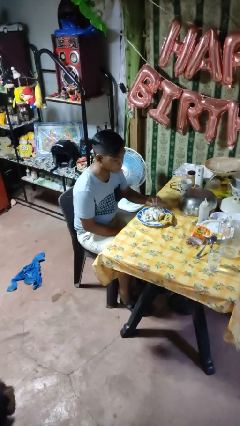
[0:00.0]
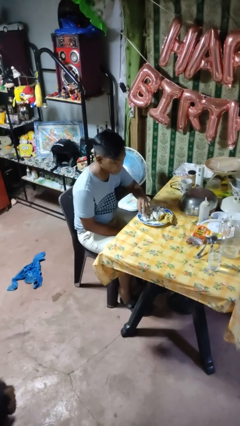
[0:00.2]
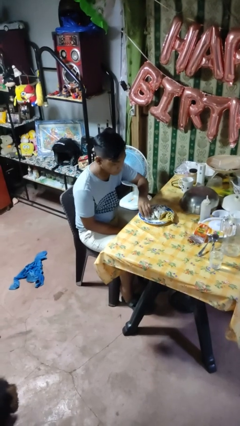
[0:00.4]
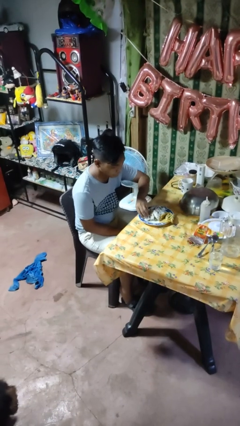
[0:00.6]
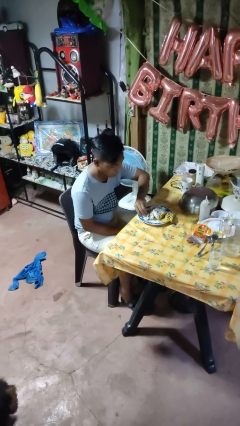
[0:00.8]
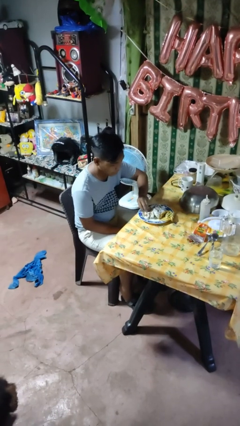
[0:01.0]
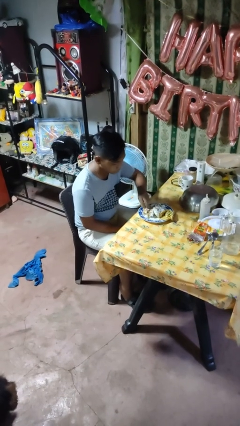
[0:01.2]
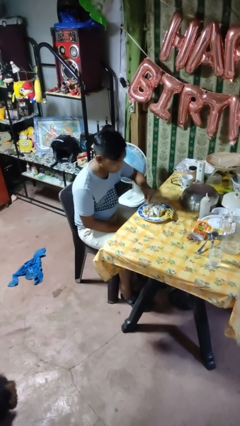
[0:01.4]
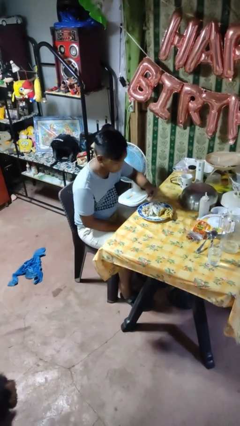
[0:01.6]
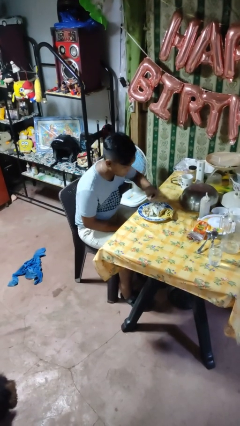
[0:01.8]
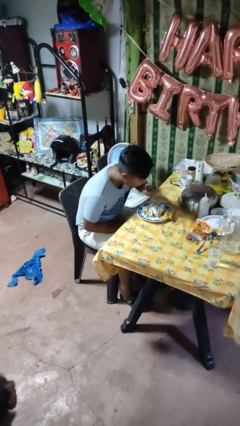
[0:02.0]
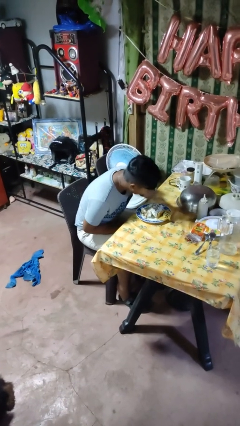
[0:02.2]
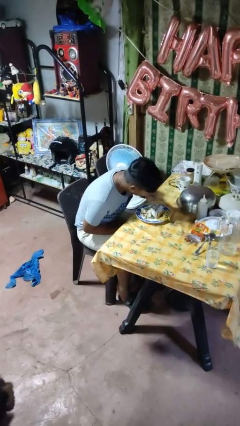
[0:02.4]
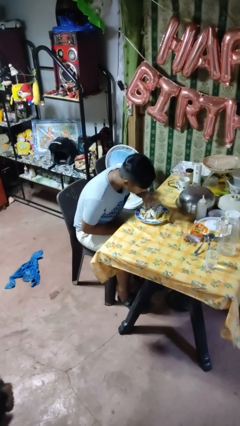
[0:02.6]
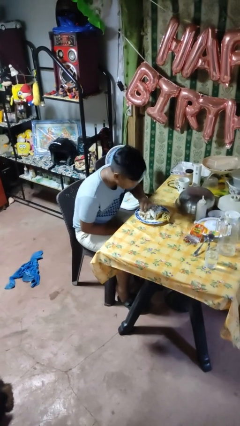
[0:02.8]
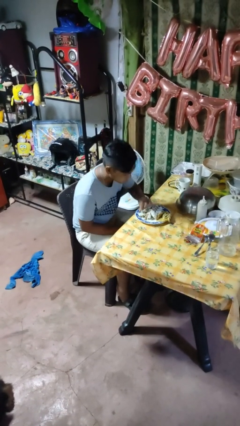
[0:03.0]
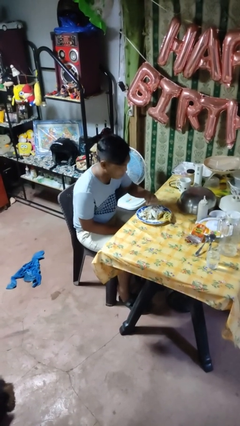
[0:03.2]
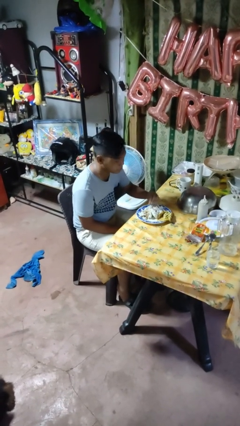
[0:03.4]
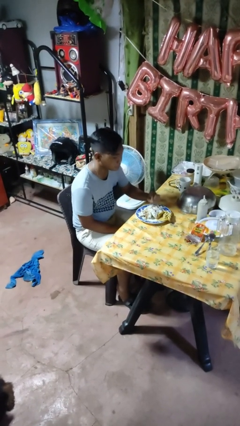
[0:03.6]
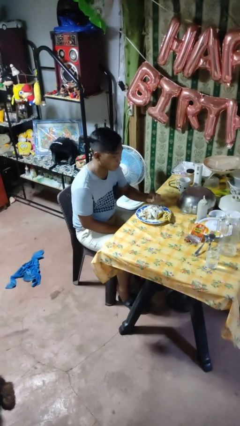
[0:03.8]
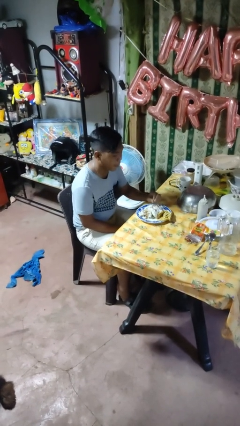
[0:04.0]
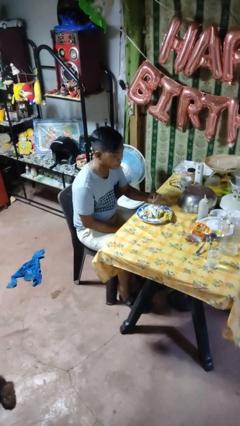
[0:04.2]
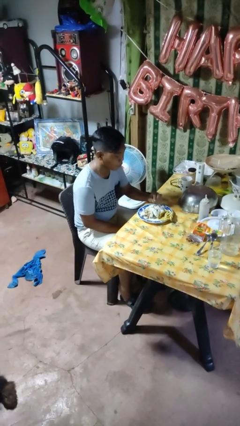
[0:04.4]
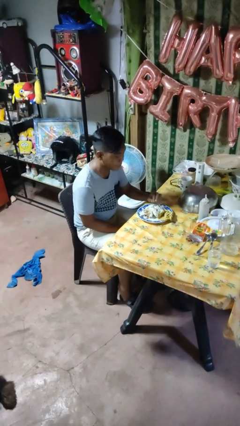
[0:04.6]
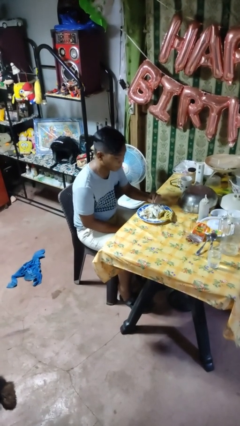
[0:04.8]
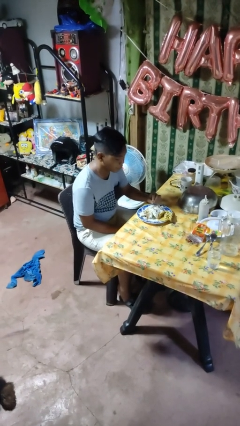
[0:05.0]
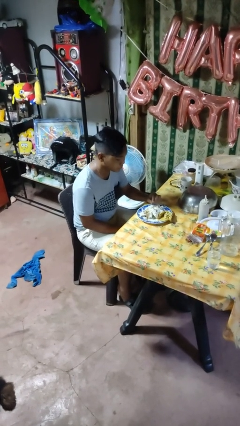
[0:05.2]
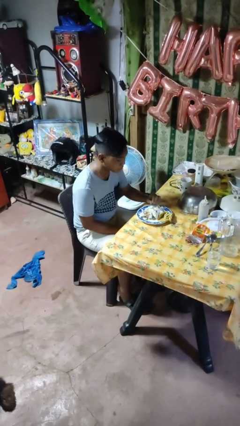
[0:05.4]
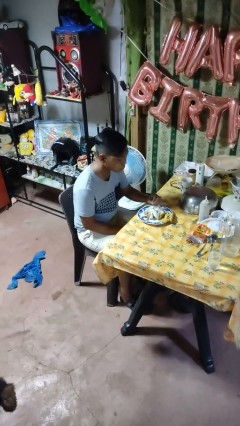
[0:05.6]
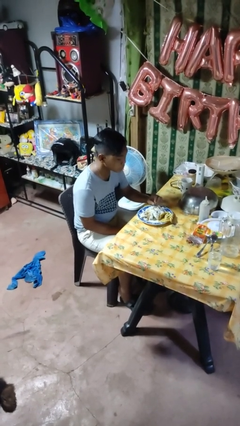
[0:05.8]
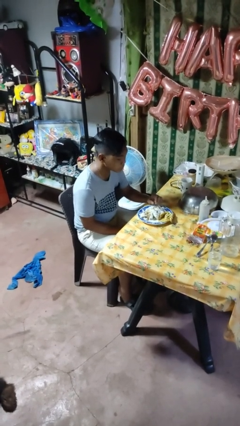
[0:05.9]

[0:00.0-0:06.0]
person eats with hands

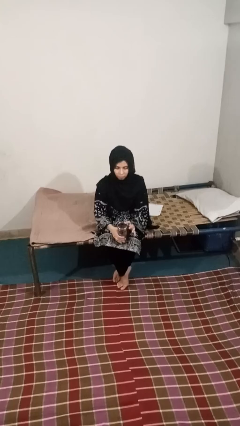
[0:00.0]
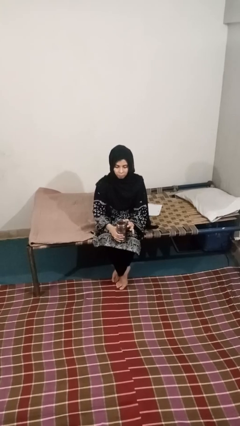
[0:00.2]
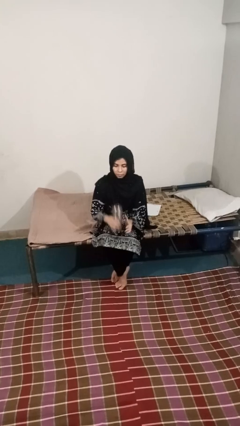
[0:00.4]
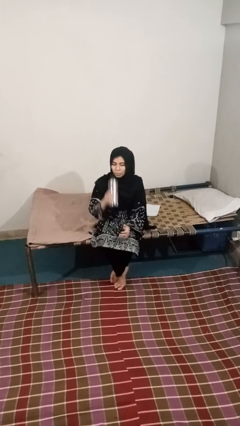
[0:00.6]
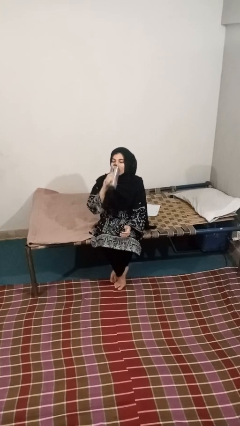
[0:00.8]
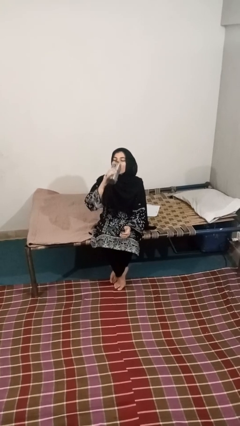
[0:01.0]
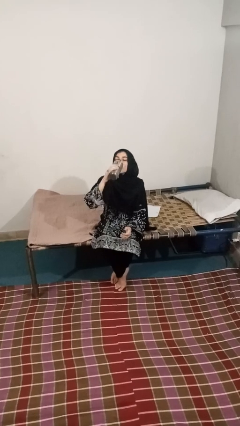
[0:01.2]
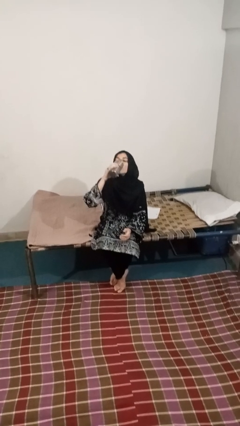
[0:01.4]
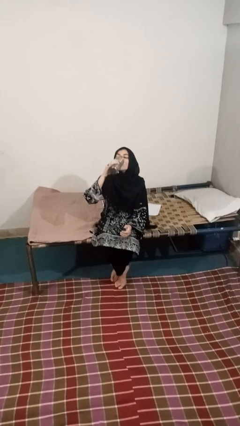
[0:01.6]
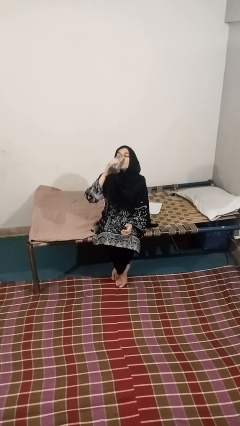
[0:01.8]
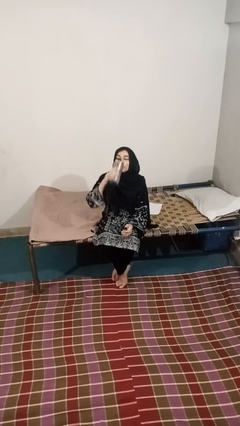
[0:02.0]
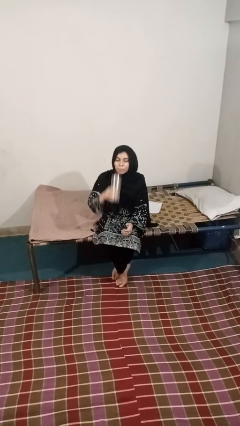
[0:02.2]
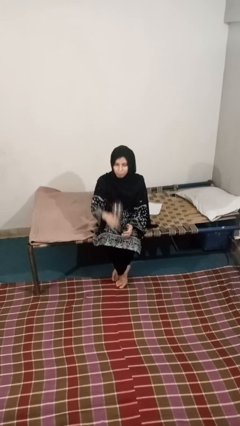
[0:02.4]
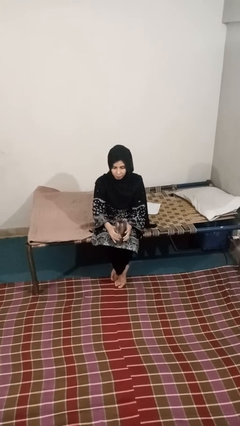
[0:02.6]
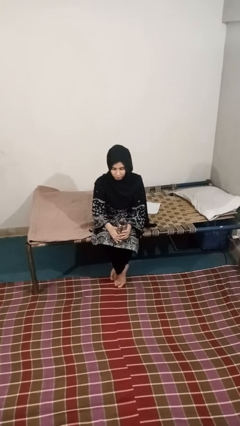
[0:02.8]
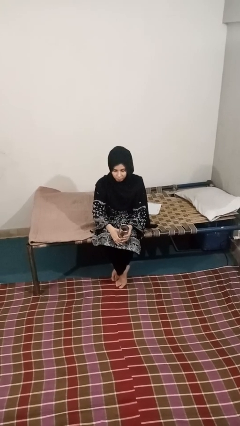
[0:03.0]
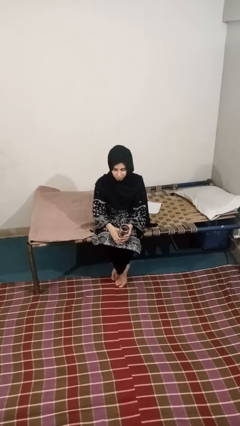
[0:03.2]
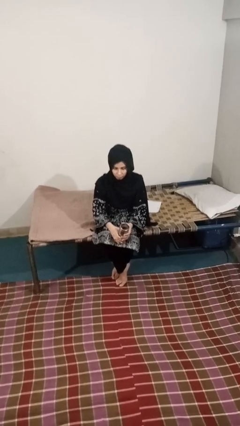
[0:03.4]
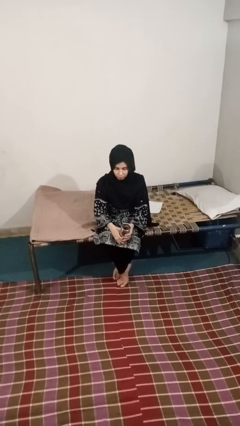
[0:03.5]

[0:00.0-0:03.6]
person drinks from beverage can

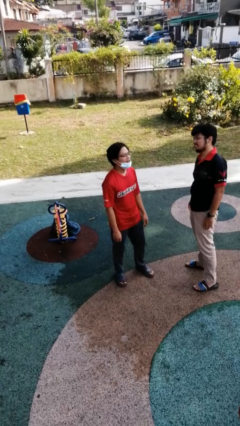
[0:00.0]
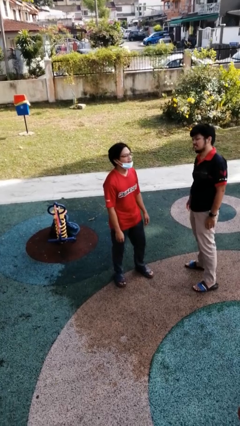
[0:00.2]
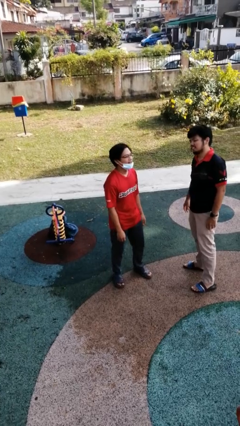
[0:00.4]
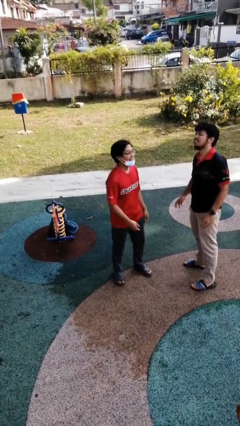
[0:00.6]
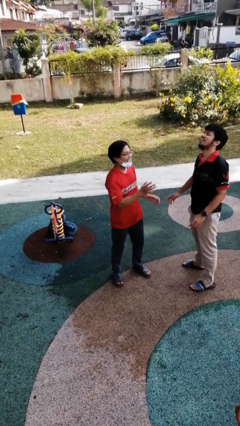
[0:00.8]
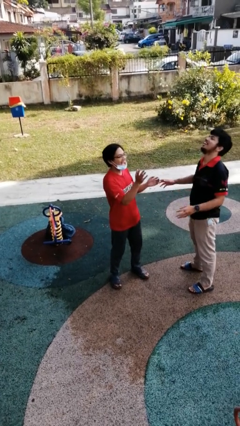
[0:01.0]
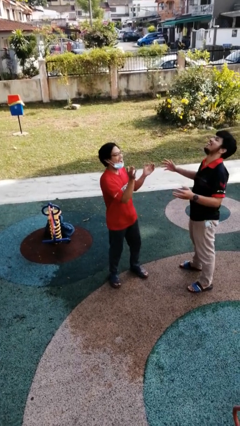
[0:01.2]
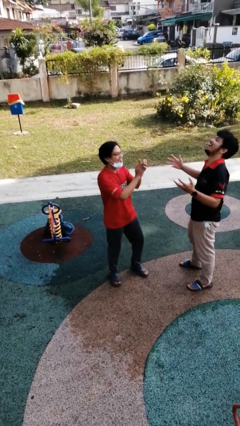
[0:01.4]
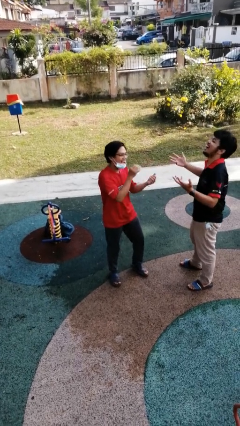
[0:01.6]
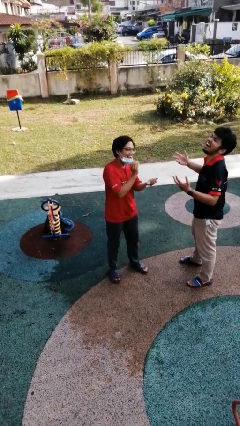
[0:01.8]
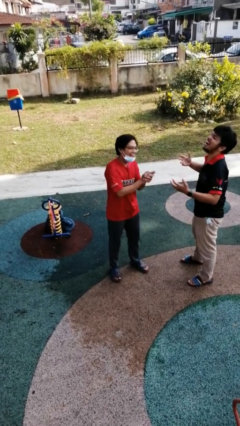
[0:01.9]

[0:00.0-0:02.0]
person laughs with person

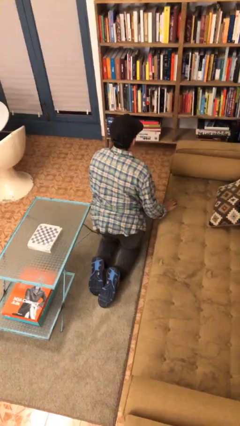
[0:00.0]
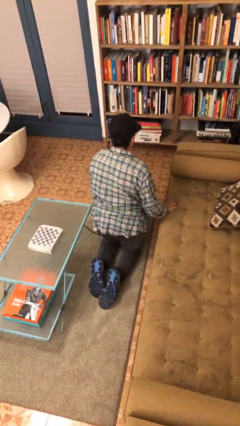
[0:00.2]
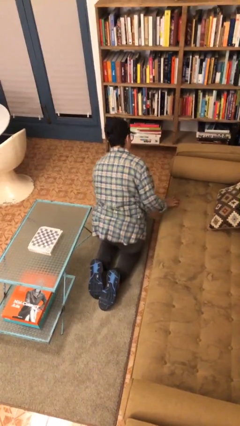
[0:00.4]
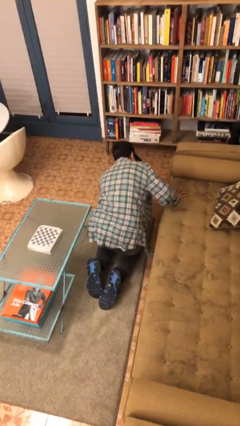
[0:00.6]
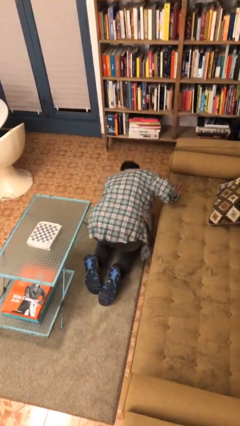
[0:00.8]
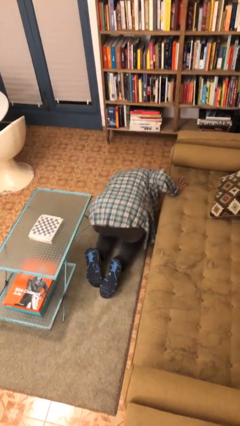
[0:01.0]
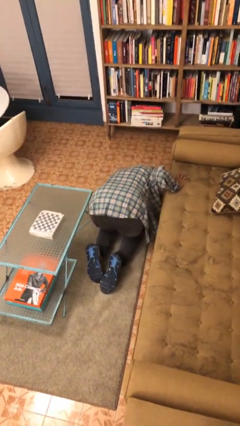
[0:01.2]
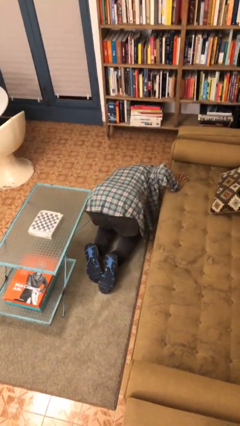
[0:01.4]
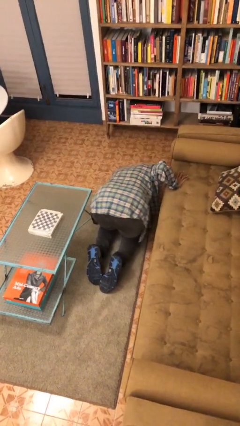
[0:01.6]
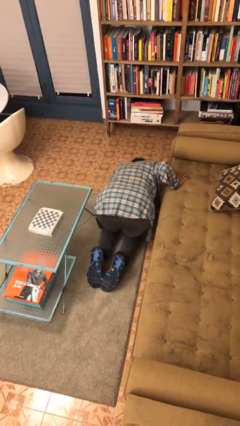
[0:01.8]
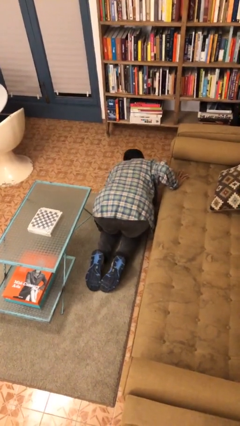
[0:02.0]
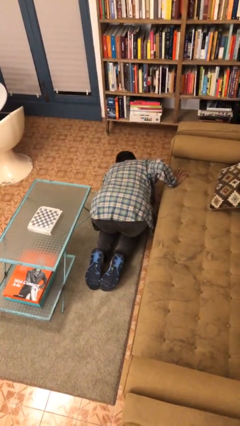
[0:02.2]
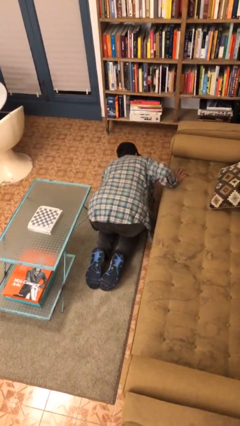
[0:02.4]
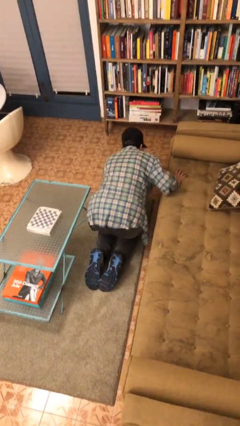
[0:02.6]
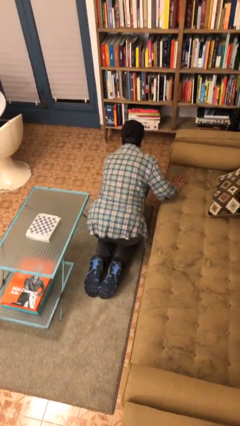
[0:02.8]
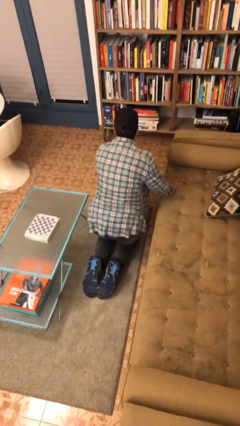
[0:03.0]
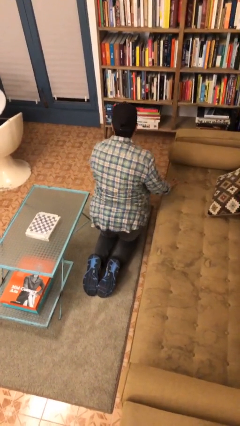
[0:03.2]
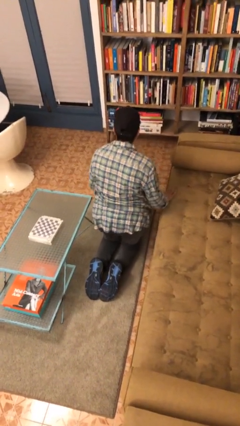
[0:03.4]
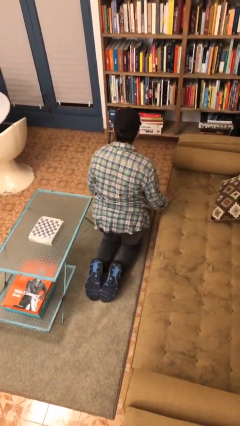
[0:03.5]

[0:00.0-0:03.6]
person searches under couch

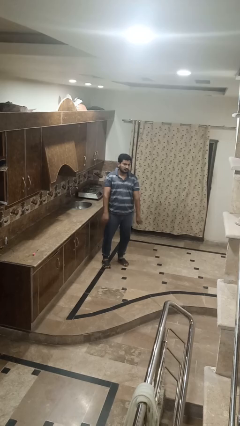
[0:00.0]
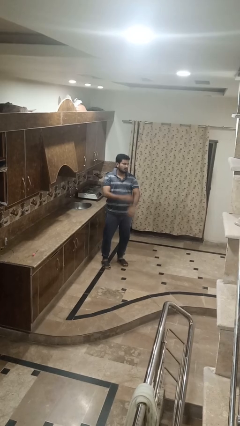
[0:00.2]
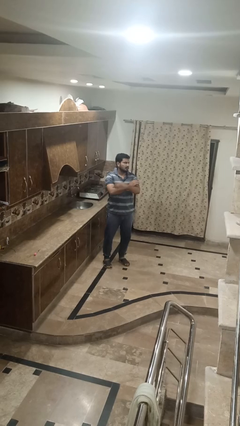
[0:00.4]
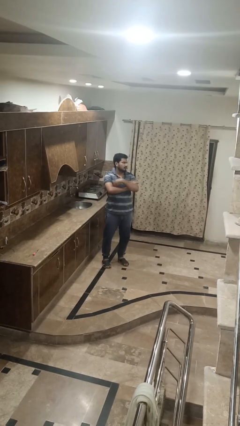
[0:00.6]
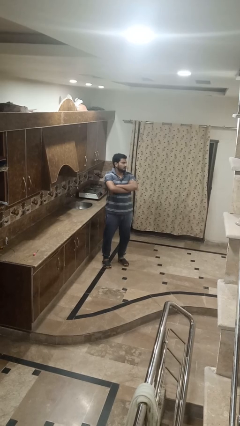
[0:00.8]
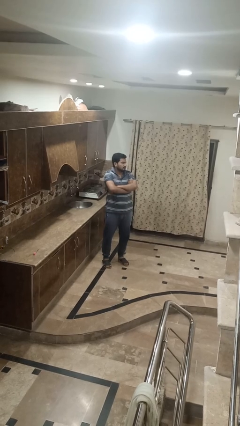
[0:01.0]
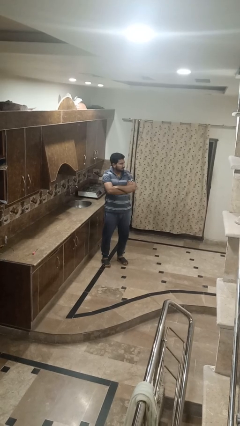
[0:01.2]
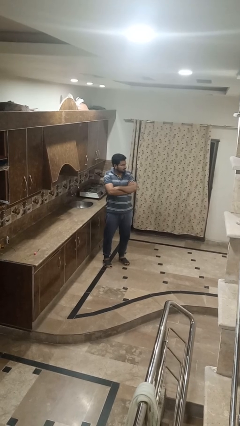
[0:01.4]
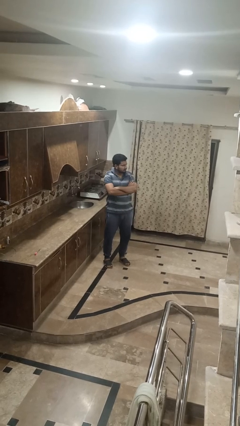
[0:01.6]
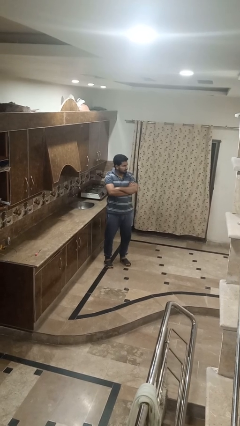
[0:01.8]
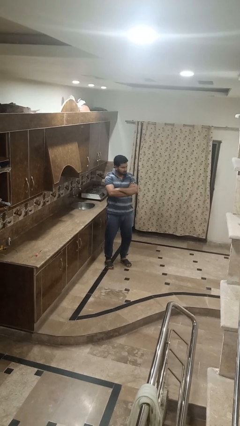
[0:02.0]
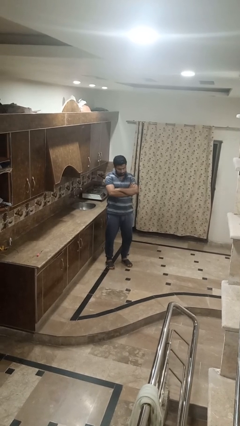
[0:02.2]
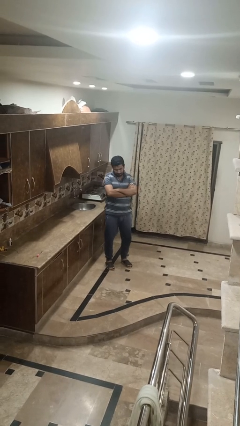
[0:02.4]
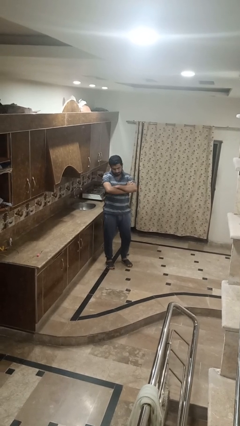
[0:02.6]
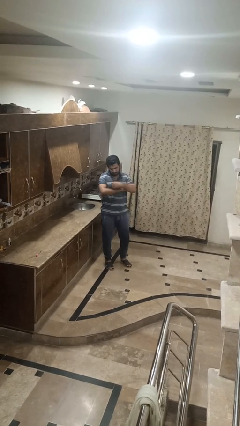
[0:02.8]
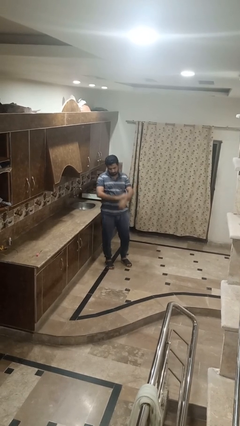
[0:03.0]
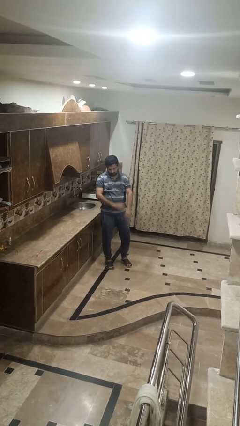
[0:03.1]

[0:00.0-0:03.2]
person crosses arms
